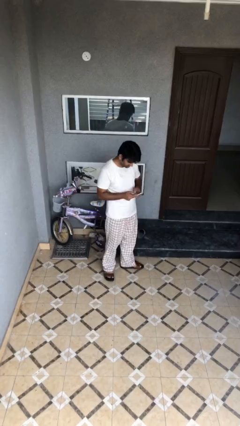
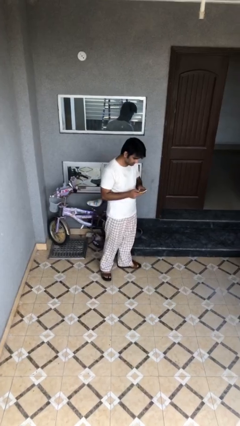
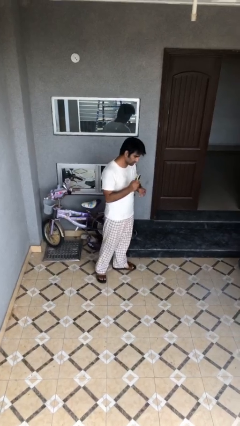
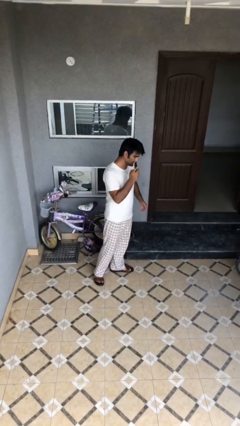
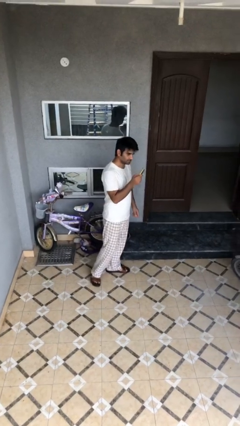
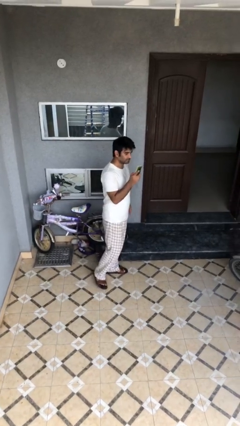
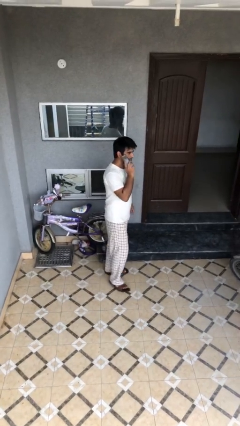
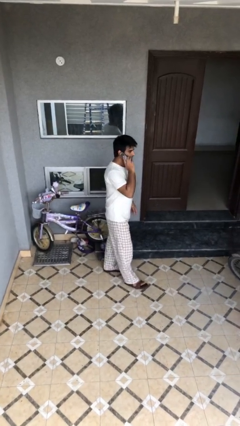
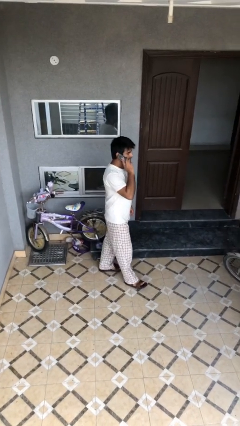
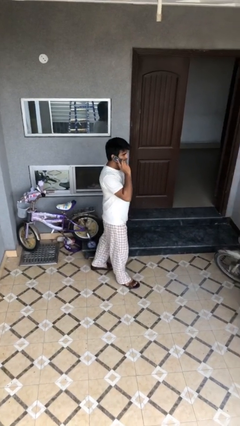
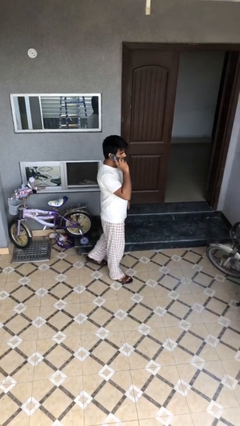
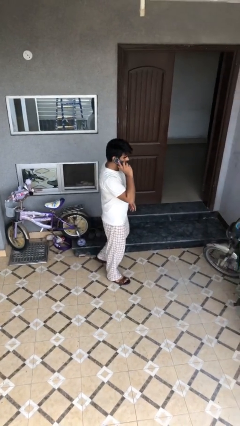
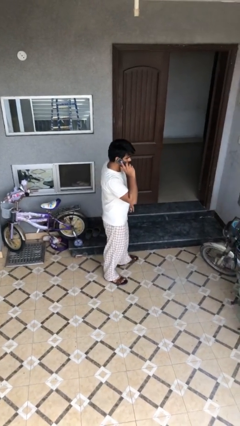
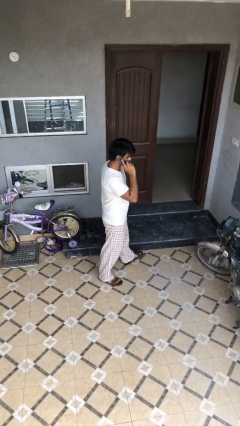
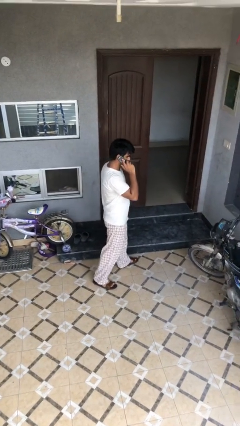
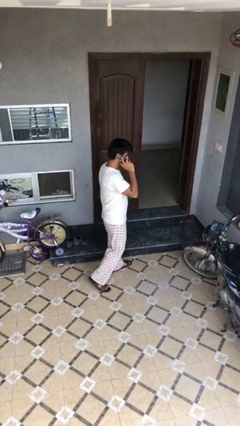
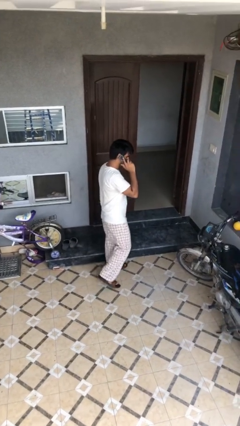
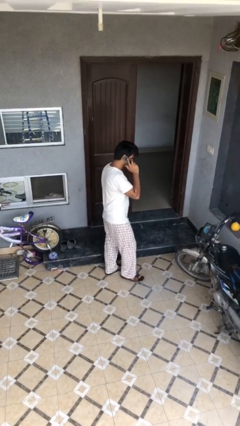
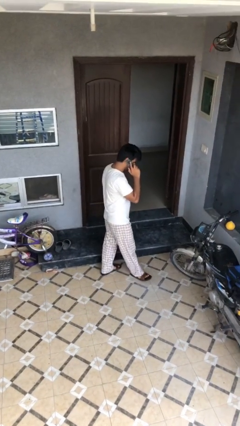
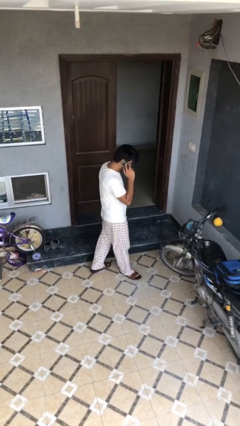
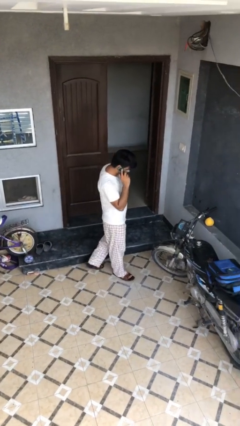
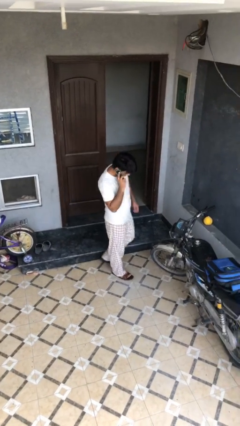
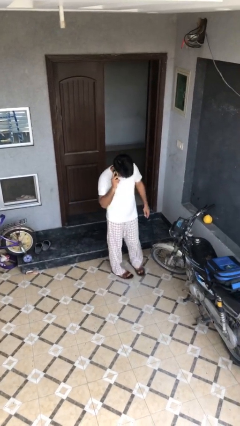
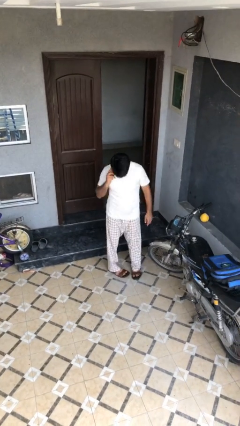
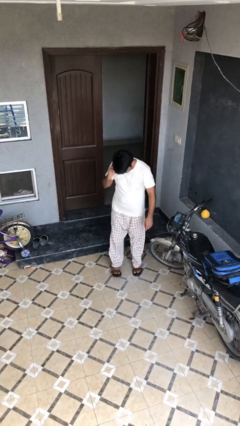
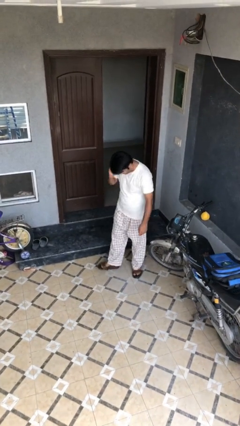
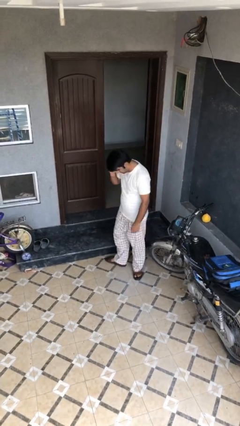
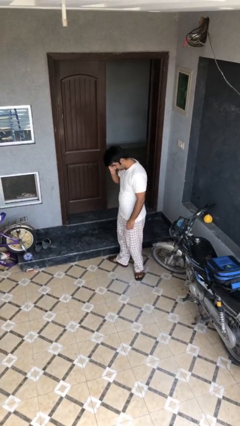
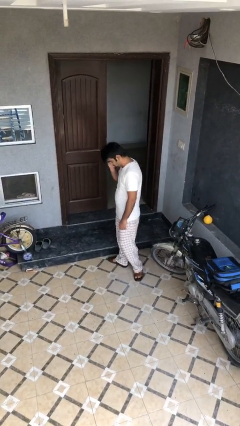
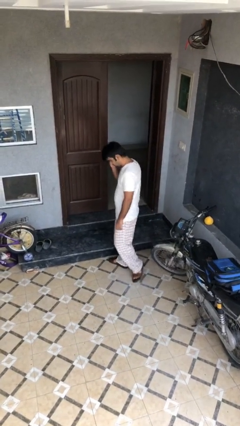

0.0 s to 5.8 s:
person talks on phone

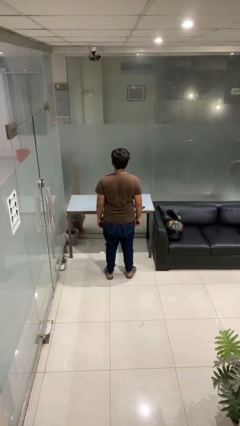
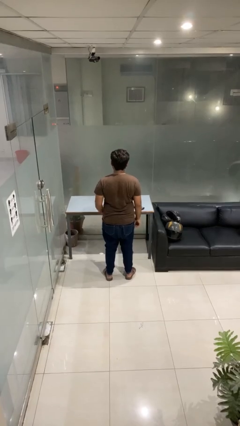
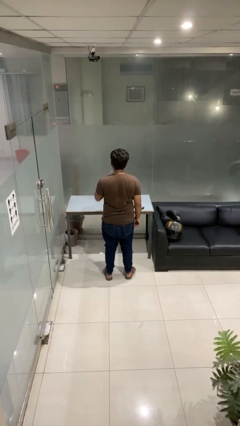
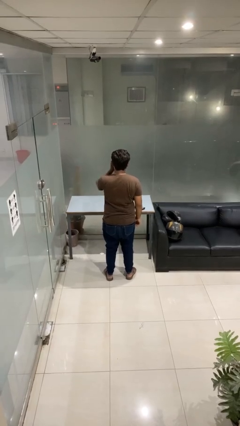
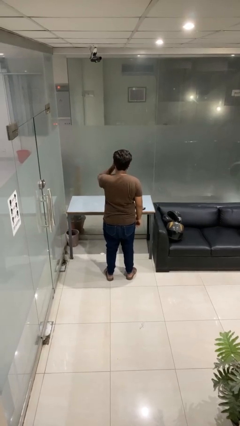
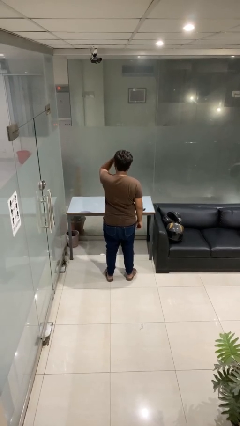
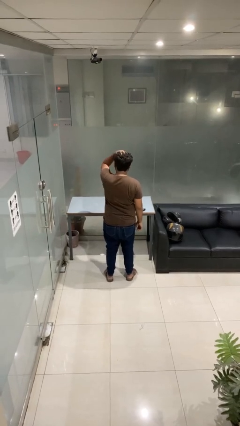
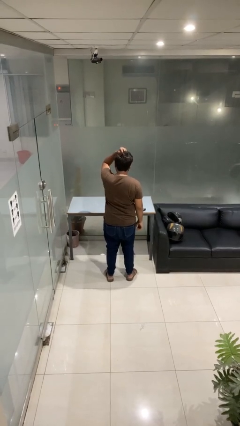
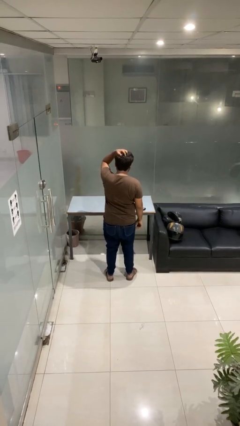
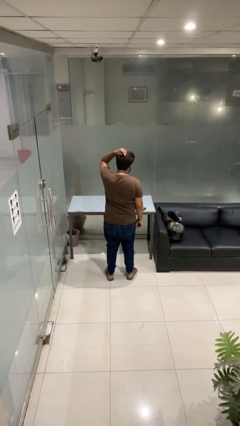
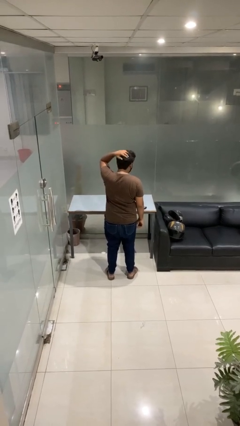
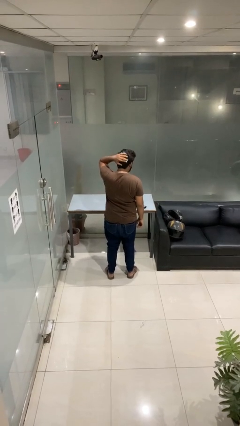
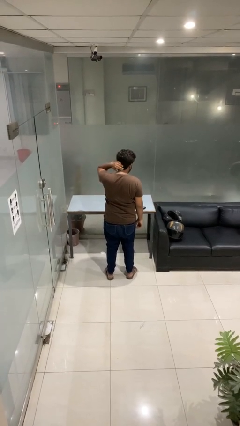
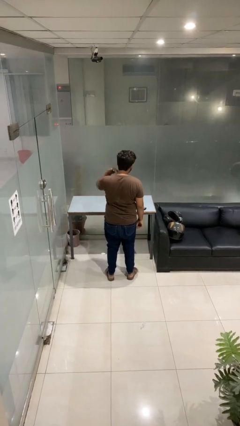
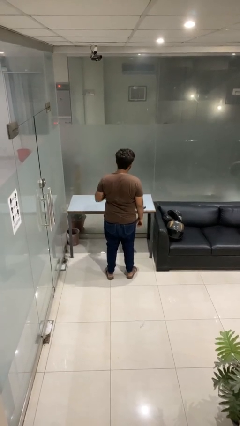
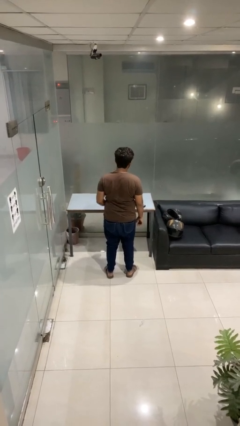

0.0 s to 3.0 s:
person strokes hair

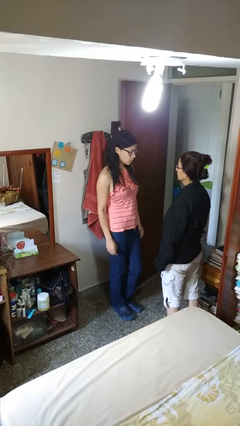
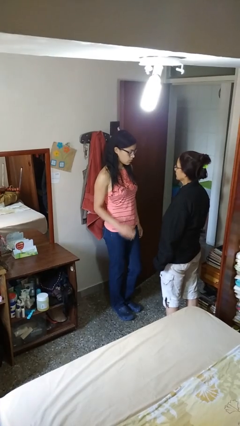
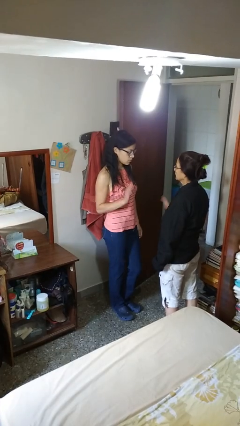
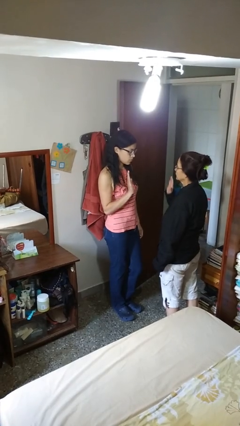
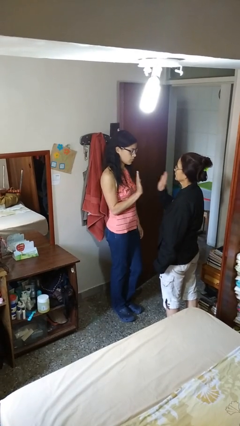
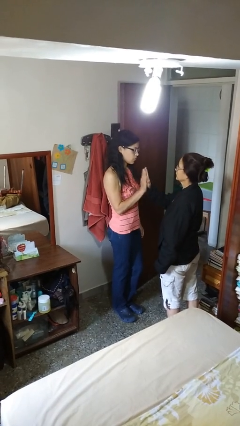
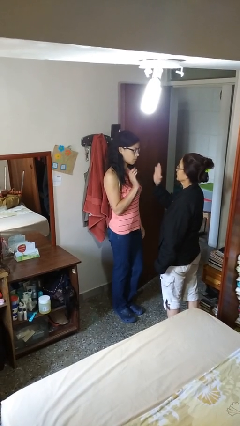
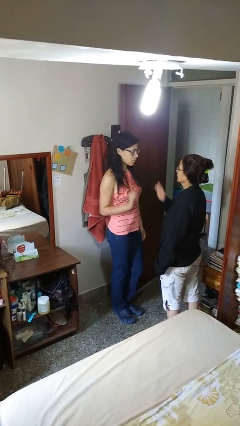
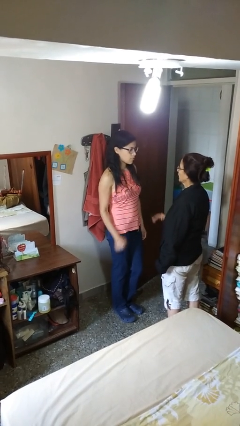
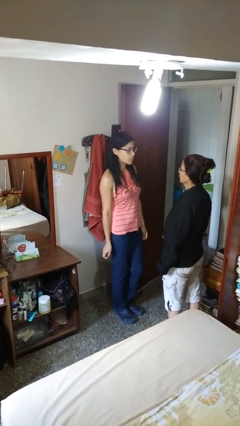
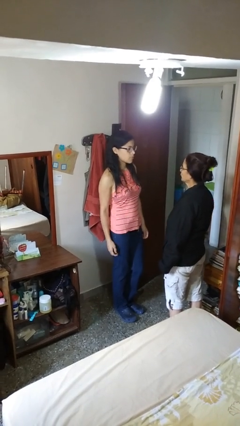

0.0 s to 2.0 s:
person highfives hand

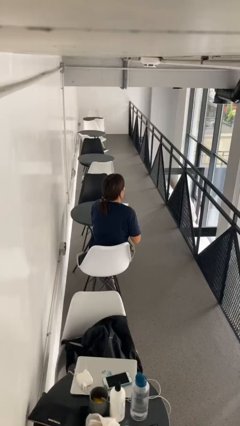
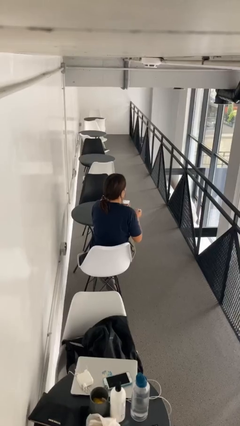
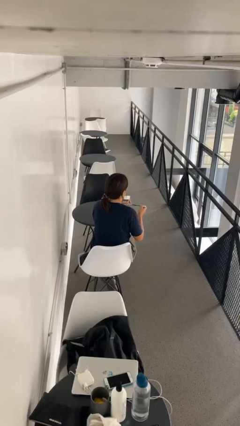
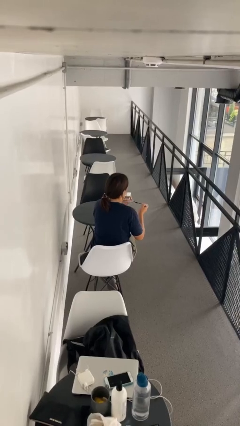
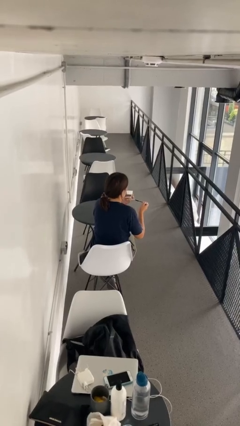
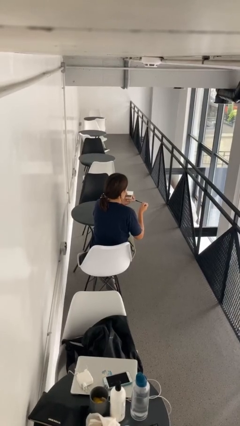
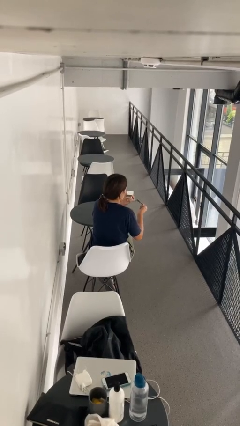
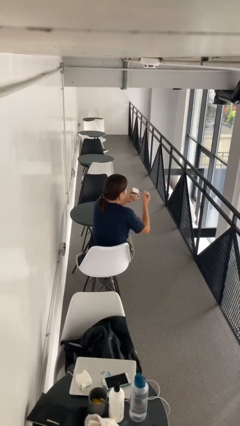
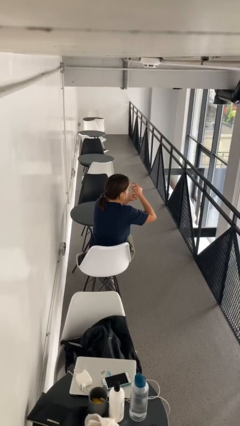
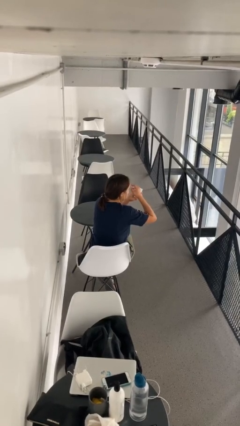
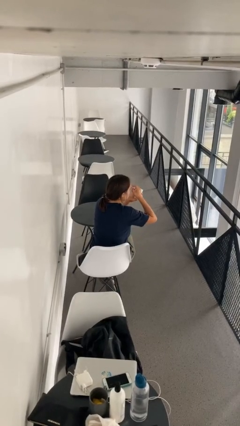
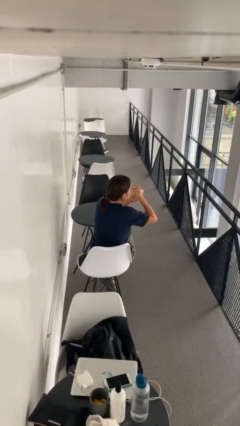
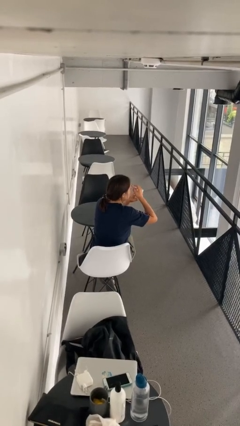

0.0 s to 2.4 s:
person applies eye makeup

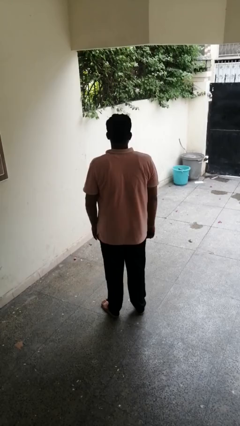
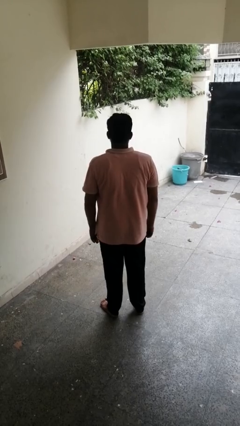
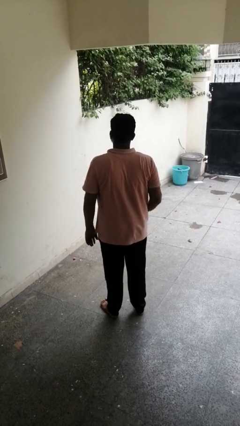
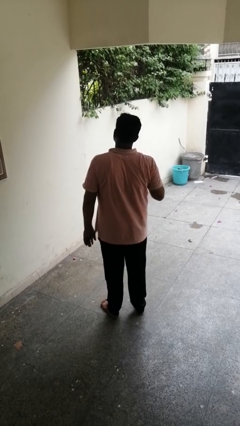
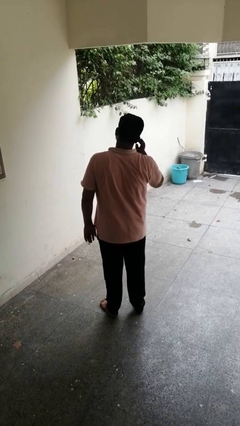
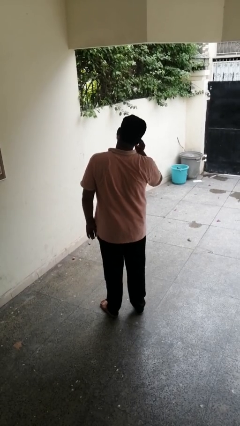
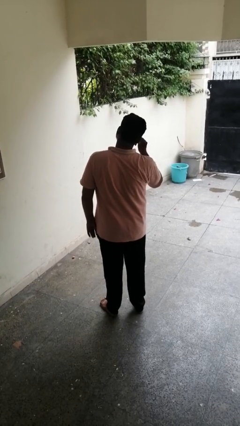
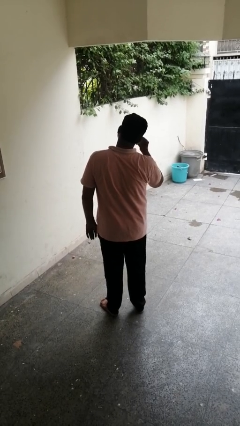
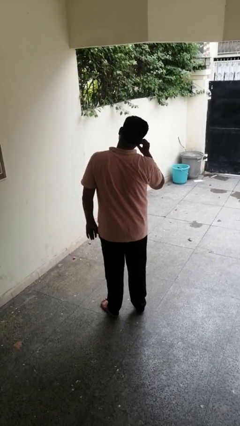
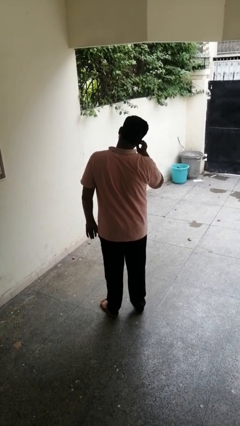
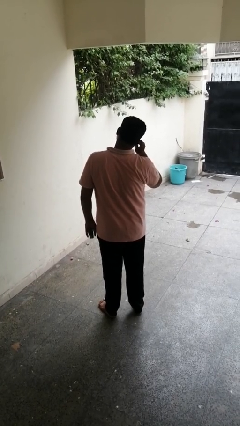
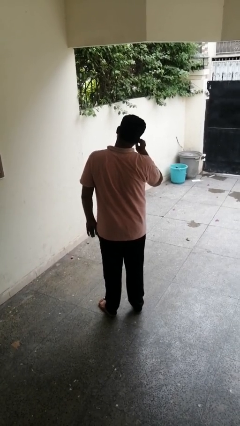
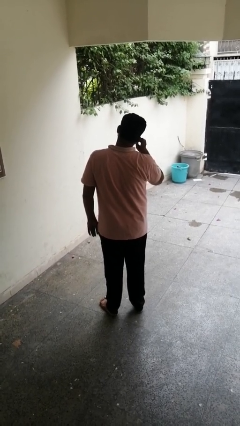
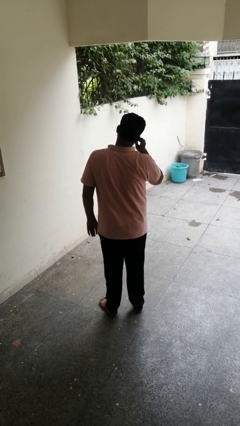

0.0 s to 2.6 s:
person touches earlobe

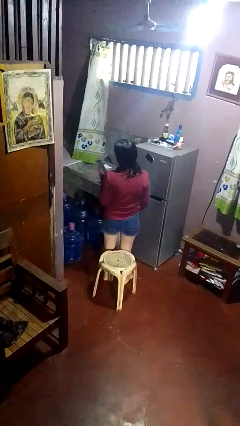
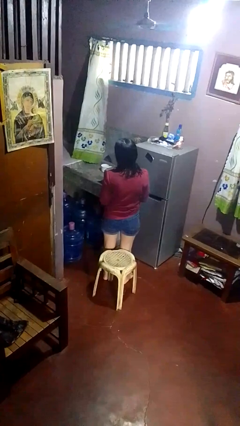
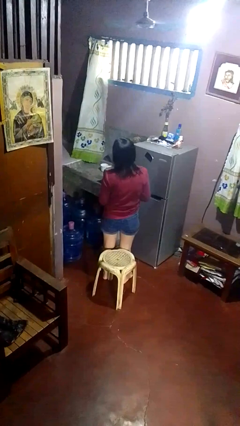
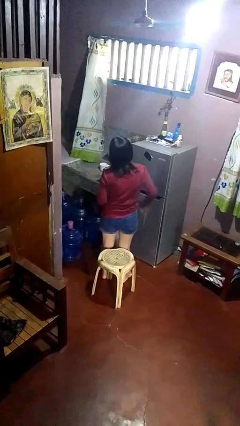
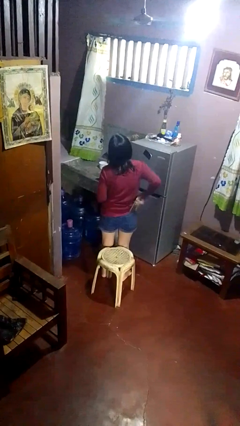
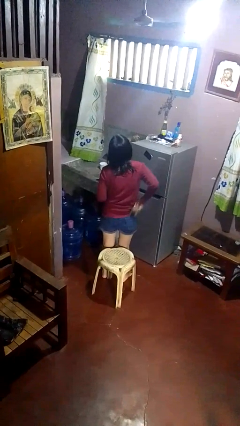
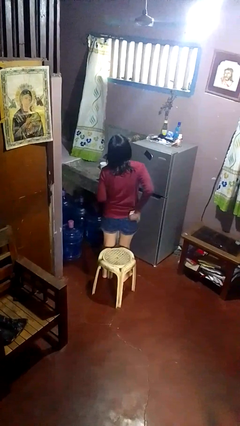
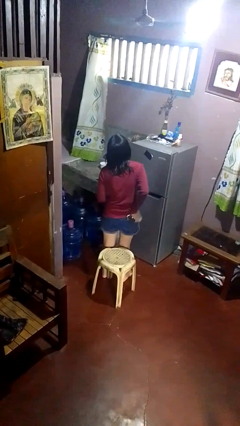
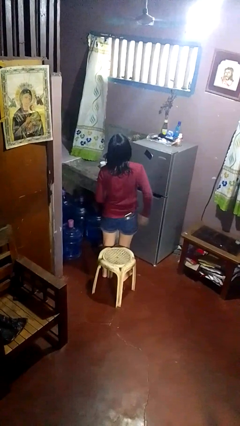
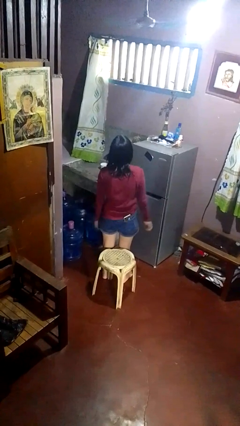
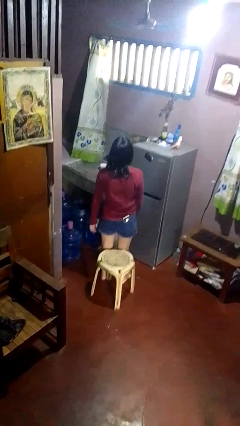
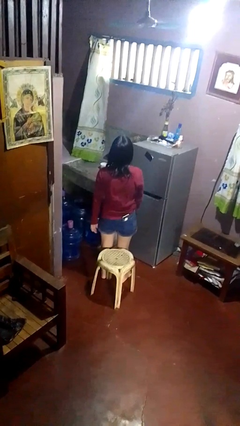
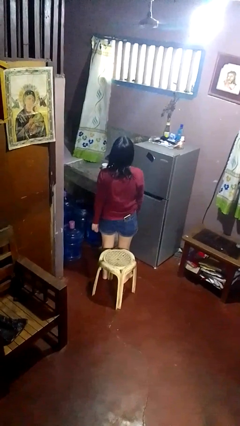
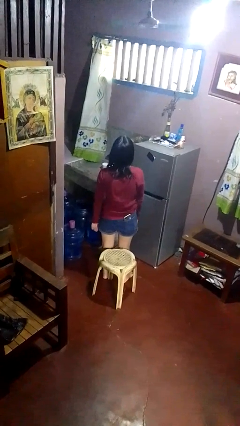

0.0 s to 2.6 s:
person puts phone into pocket
